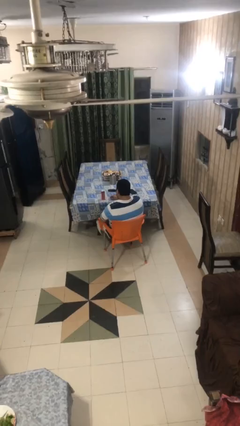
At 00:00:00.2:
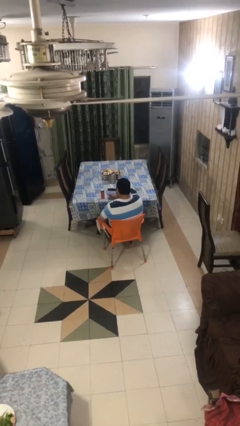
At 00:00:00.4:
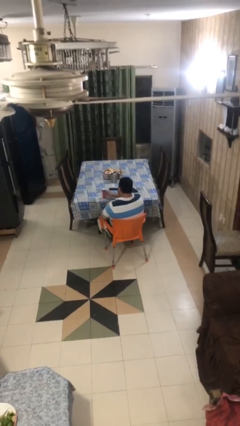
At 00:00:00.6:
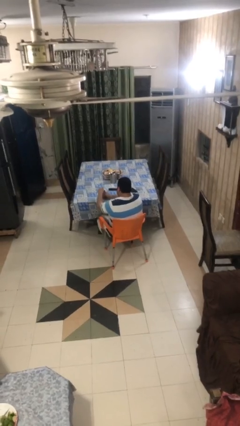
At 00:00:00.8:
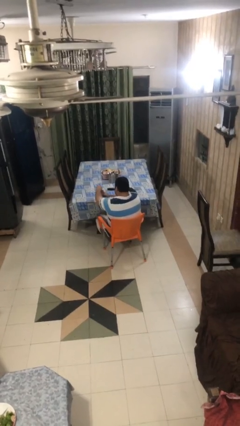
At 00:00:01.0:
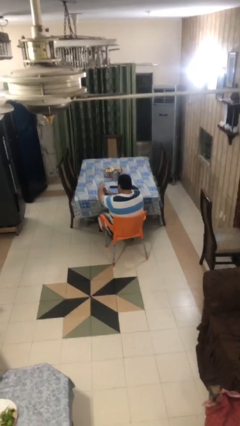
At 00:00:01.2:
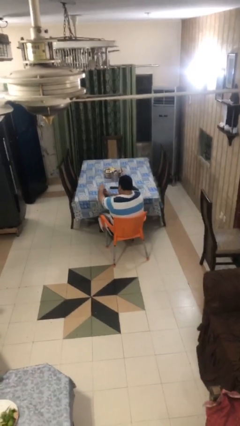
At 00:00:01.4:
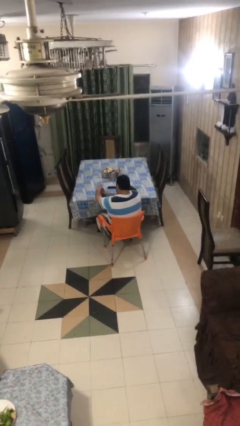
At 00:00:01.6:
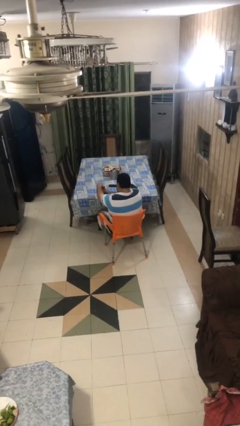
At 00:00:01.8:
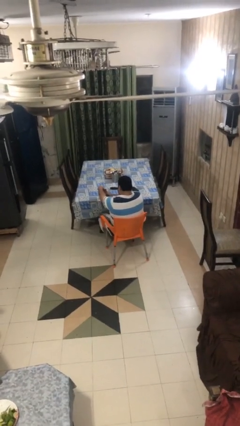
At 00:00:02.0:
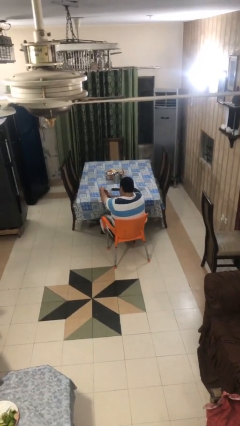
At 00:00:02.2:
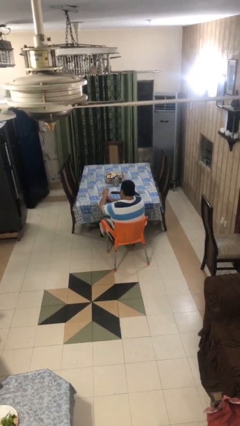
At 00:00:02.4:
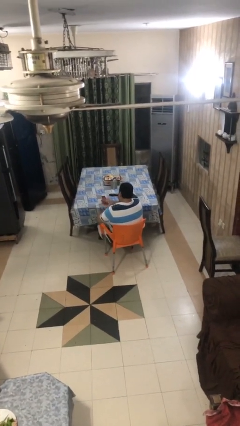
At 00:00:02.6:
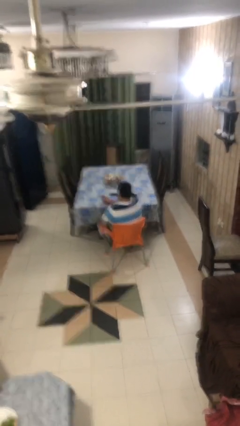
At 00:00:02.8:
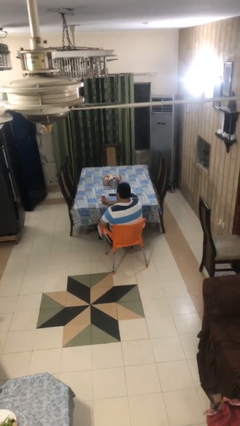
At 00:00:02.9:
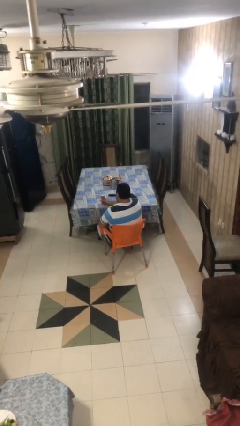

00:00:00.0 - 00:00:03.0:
person opens beverage can

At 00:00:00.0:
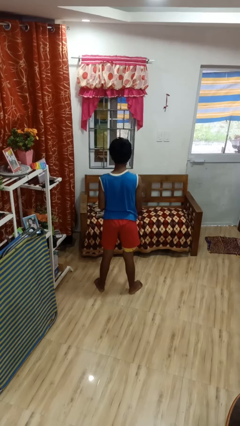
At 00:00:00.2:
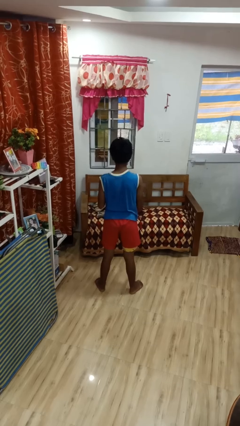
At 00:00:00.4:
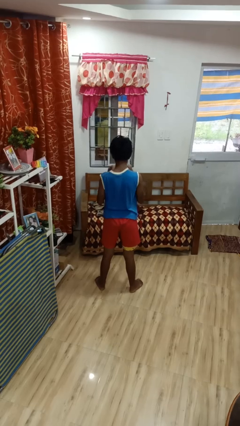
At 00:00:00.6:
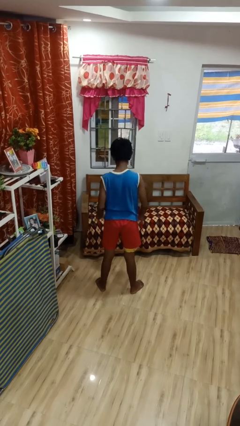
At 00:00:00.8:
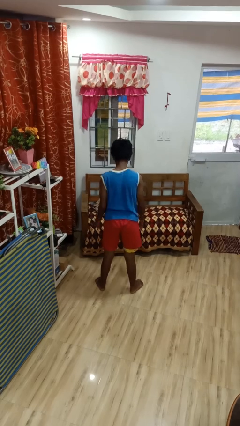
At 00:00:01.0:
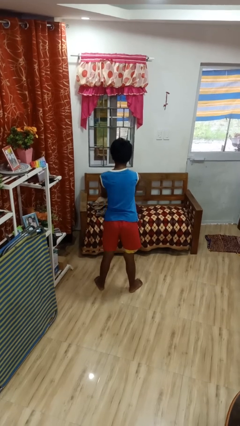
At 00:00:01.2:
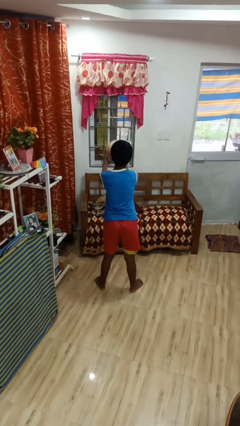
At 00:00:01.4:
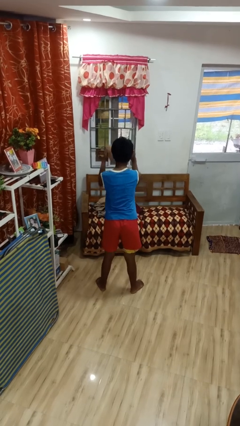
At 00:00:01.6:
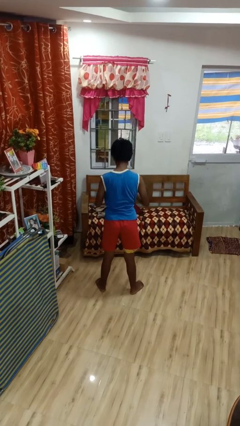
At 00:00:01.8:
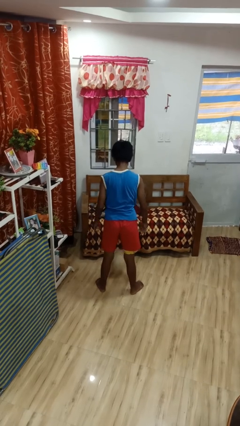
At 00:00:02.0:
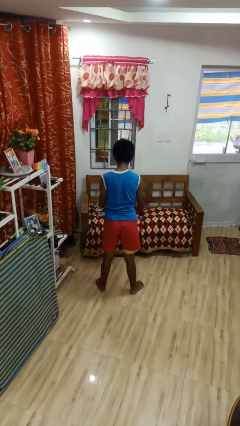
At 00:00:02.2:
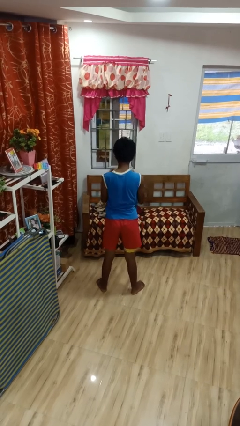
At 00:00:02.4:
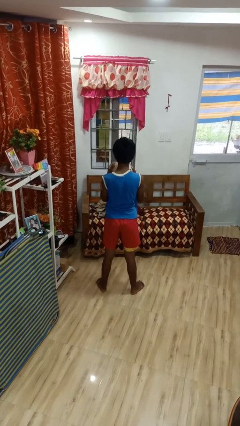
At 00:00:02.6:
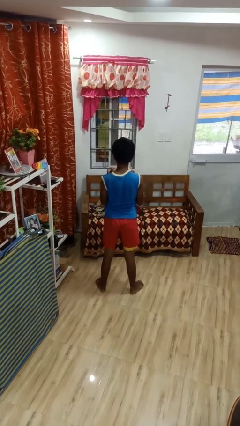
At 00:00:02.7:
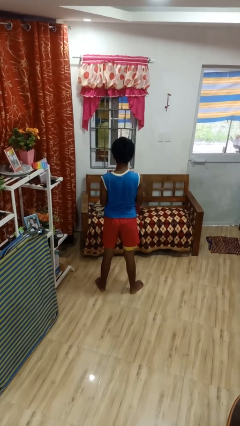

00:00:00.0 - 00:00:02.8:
person bounces ball on floor

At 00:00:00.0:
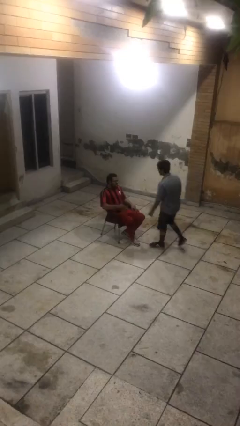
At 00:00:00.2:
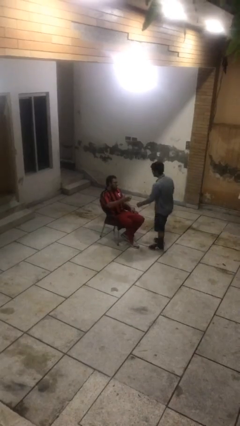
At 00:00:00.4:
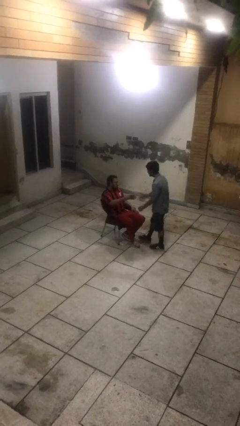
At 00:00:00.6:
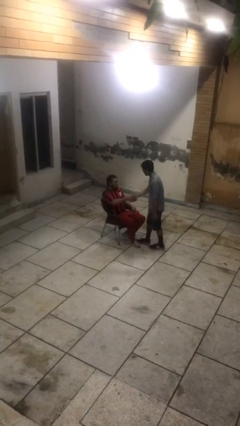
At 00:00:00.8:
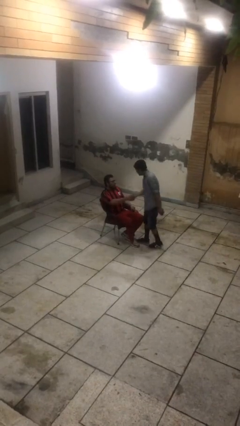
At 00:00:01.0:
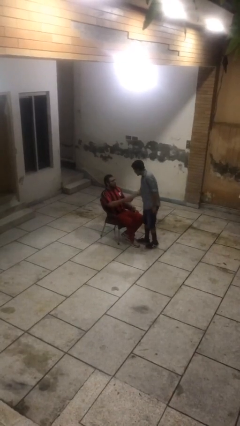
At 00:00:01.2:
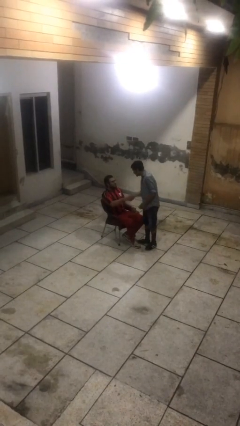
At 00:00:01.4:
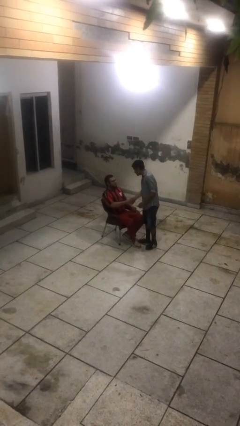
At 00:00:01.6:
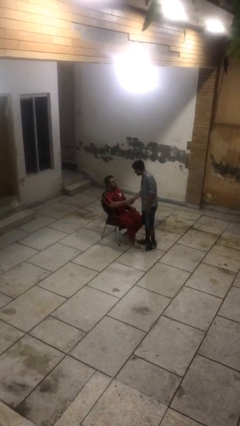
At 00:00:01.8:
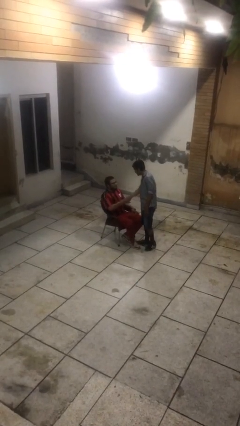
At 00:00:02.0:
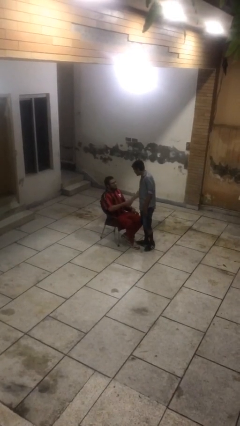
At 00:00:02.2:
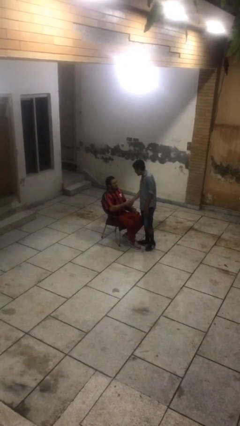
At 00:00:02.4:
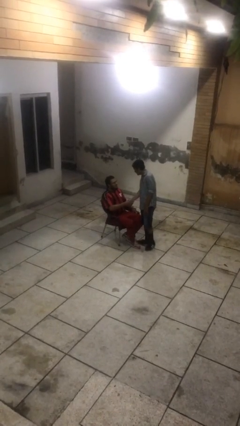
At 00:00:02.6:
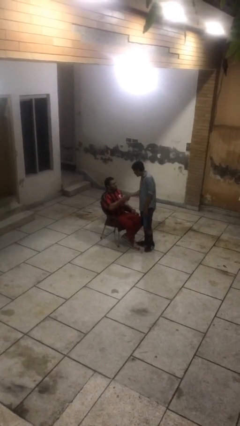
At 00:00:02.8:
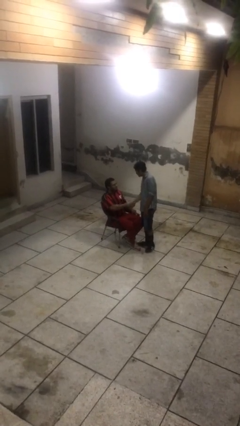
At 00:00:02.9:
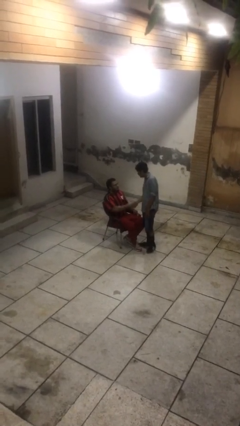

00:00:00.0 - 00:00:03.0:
person shakes hand

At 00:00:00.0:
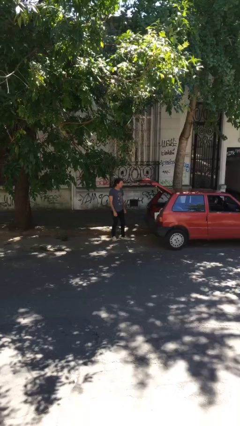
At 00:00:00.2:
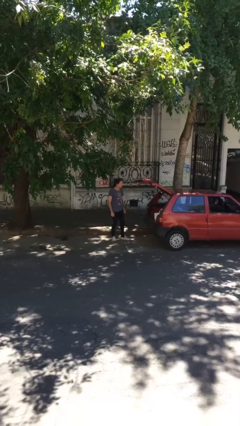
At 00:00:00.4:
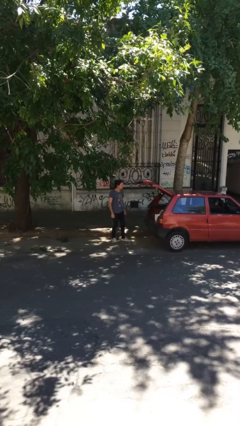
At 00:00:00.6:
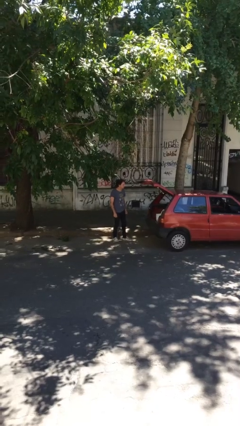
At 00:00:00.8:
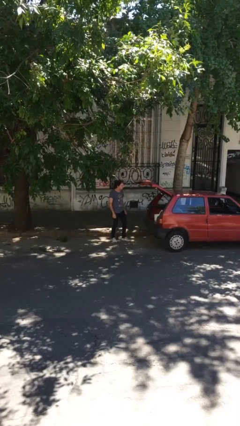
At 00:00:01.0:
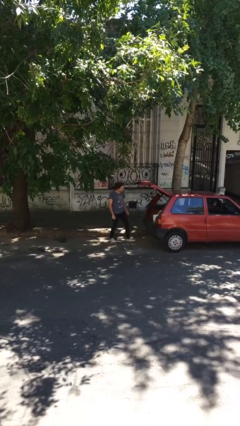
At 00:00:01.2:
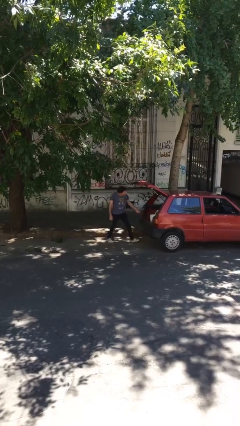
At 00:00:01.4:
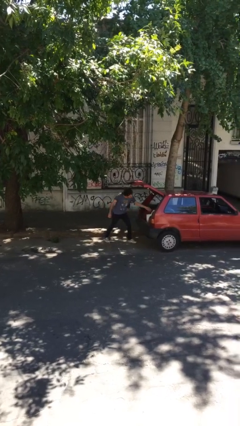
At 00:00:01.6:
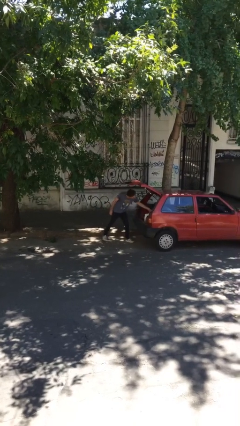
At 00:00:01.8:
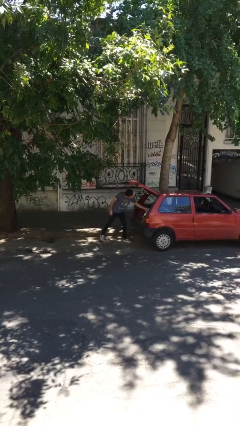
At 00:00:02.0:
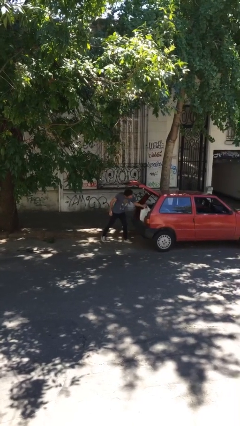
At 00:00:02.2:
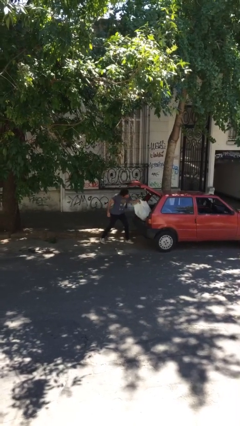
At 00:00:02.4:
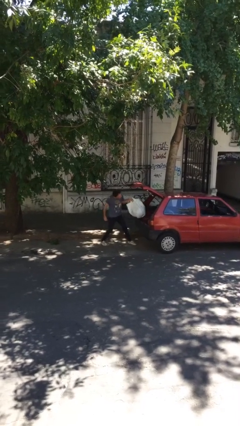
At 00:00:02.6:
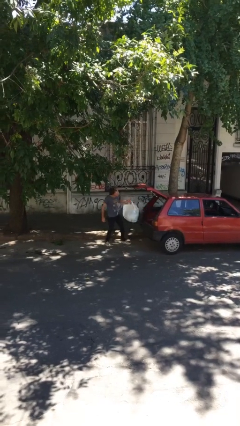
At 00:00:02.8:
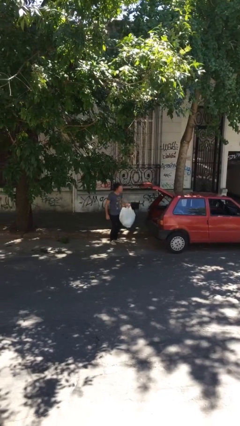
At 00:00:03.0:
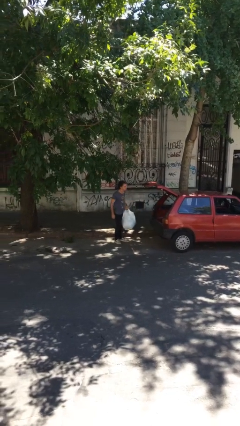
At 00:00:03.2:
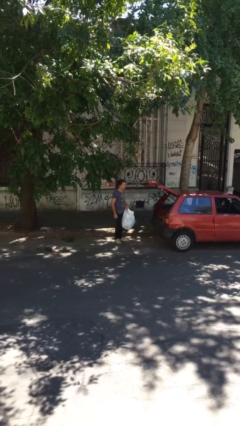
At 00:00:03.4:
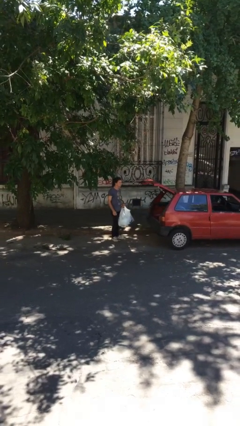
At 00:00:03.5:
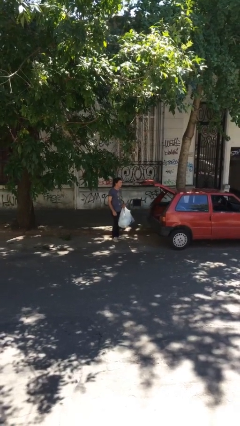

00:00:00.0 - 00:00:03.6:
person unloads car

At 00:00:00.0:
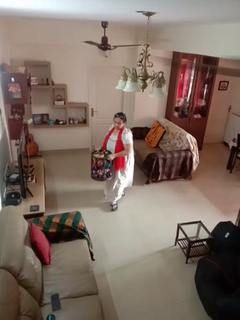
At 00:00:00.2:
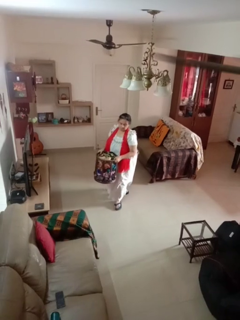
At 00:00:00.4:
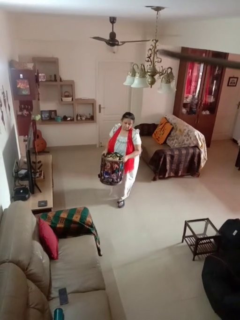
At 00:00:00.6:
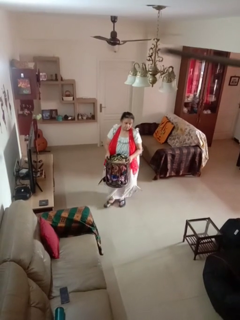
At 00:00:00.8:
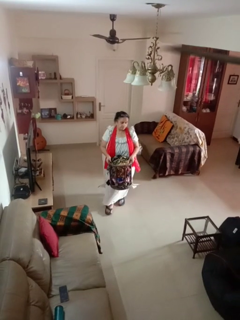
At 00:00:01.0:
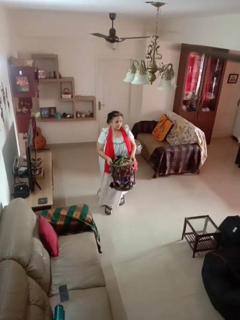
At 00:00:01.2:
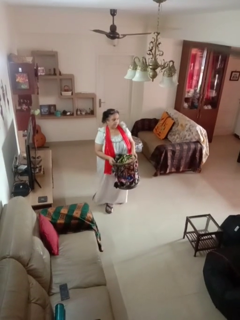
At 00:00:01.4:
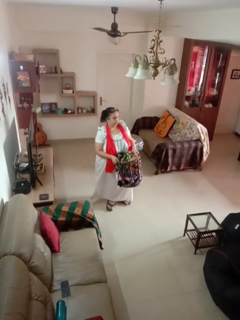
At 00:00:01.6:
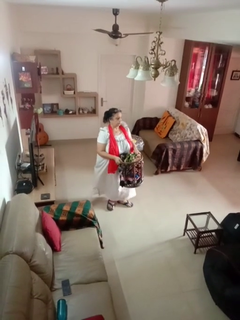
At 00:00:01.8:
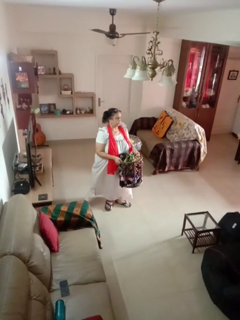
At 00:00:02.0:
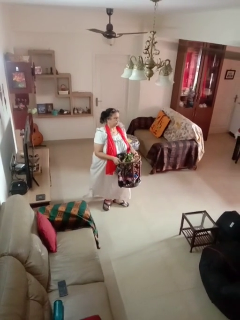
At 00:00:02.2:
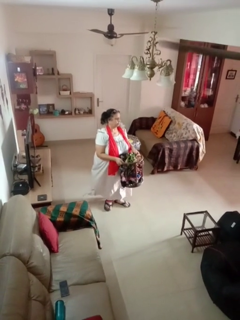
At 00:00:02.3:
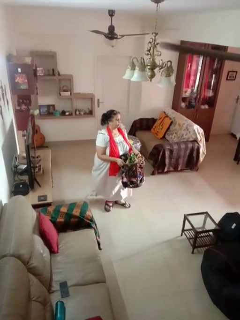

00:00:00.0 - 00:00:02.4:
person carries laundry basket

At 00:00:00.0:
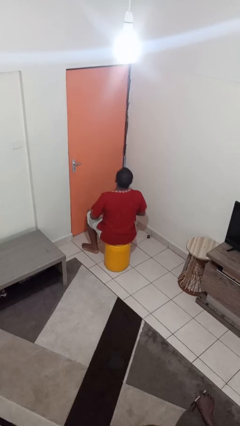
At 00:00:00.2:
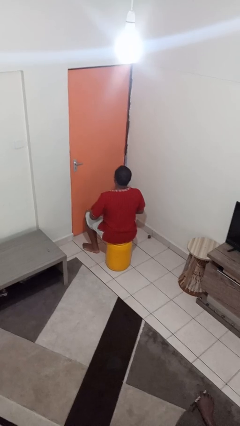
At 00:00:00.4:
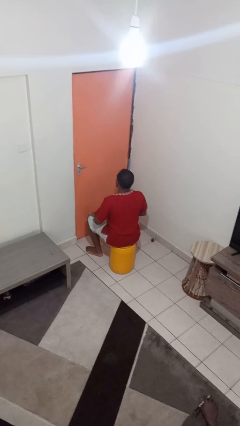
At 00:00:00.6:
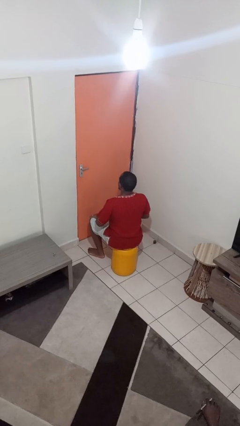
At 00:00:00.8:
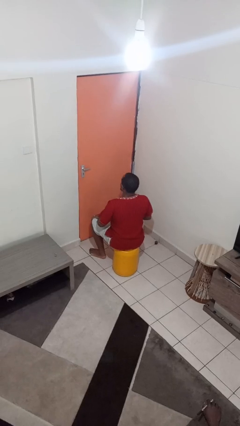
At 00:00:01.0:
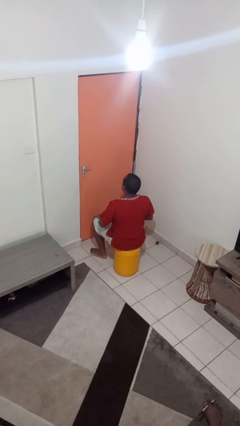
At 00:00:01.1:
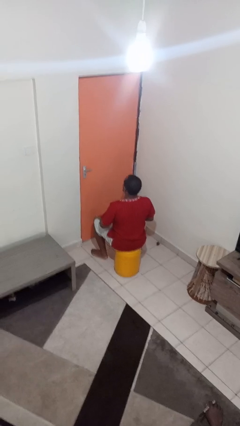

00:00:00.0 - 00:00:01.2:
person drums on chest

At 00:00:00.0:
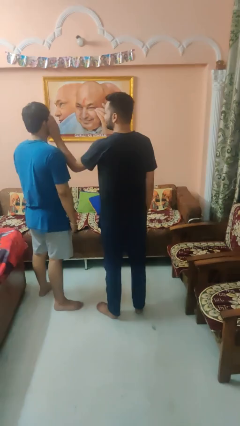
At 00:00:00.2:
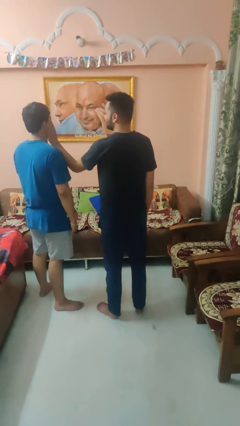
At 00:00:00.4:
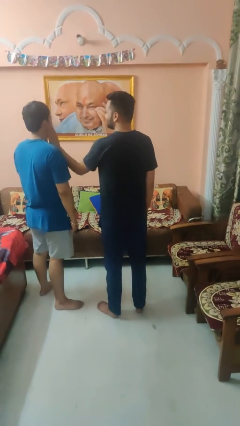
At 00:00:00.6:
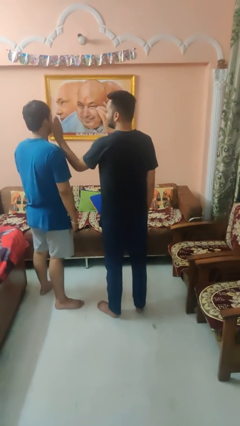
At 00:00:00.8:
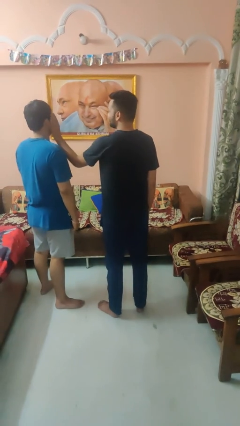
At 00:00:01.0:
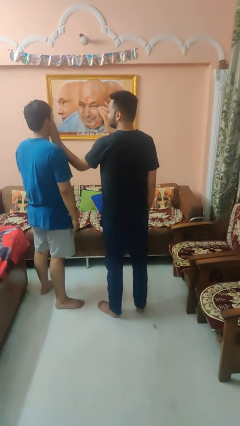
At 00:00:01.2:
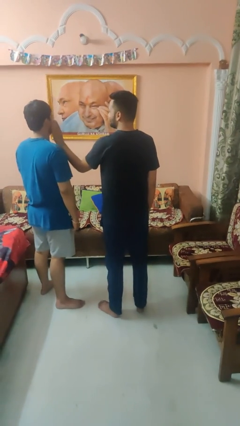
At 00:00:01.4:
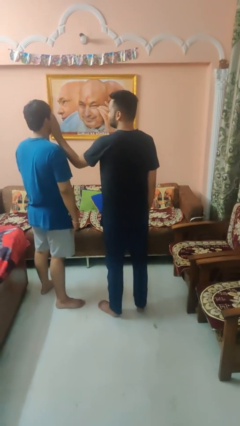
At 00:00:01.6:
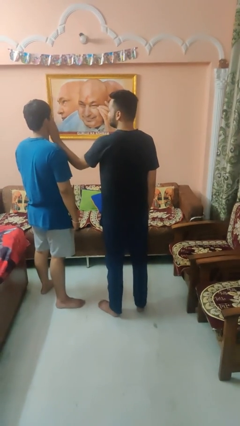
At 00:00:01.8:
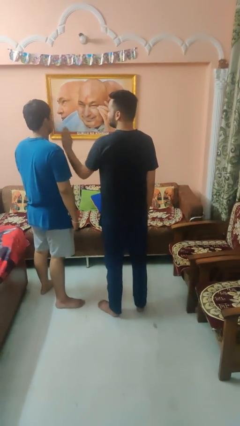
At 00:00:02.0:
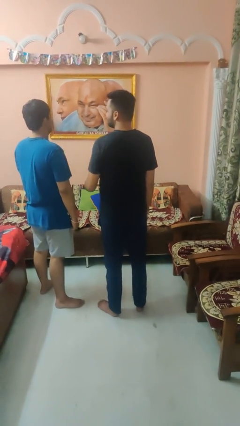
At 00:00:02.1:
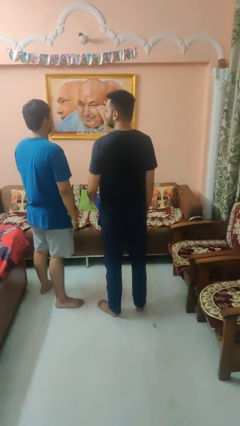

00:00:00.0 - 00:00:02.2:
person touches face of person
